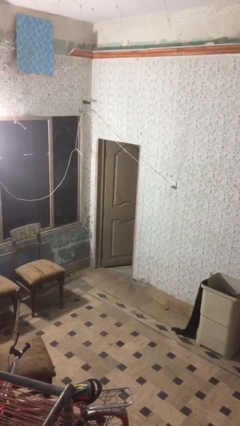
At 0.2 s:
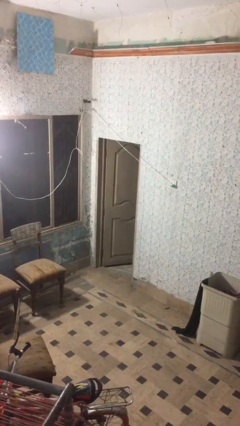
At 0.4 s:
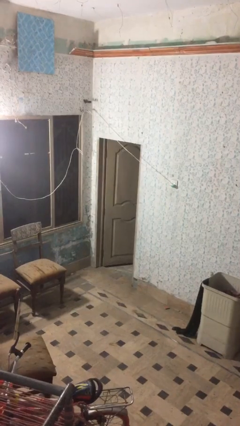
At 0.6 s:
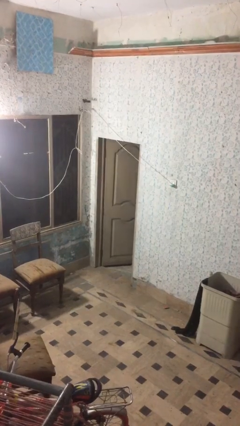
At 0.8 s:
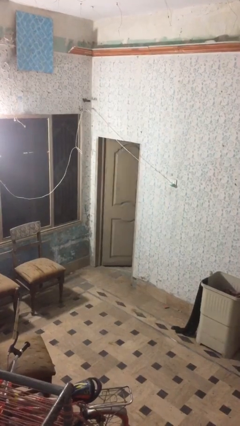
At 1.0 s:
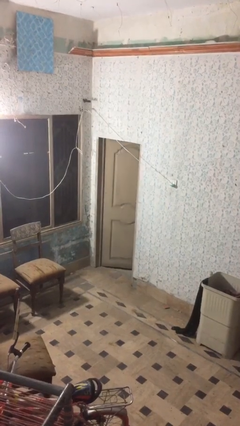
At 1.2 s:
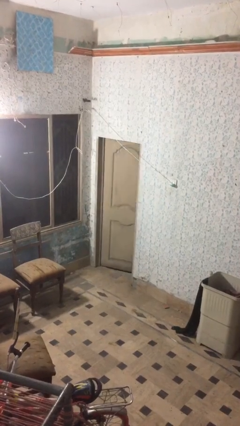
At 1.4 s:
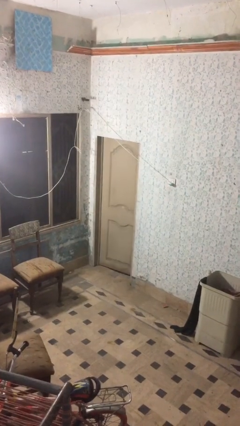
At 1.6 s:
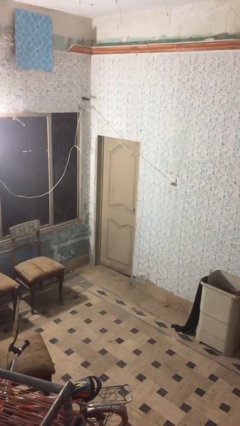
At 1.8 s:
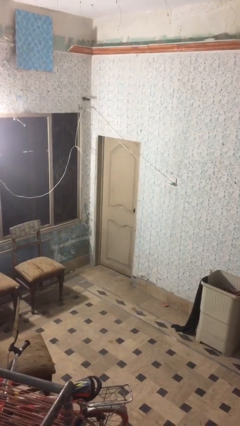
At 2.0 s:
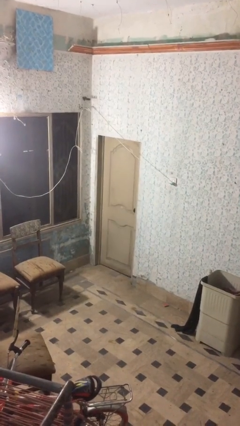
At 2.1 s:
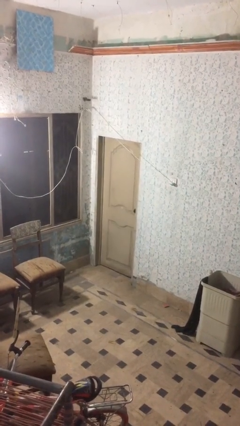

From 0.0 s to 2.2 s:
person closes facility door

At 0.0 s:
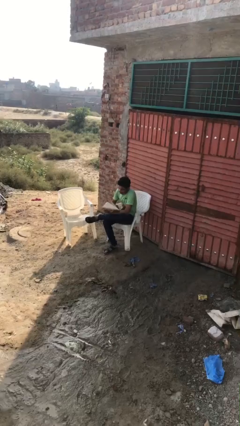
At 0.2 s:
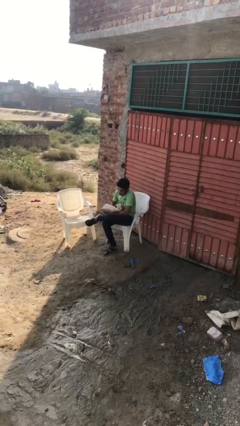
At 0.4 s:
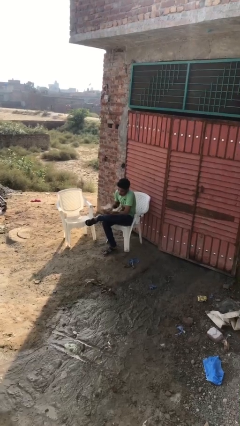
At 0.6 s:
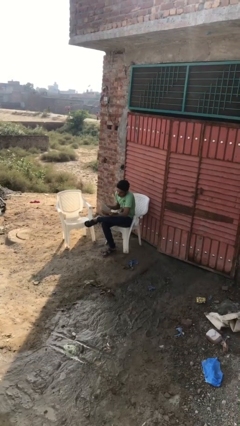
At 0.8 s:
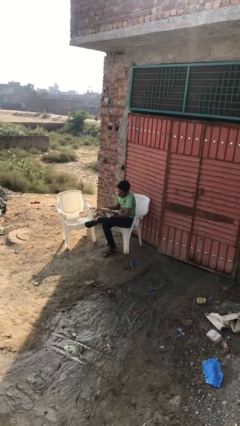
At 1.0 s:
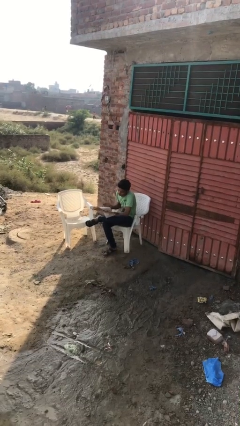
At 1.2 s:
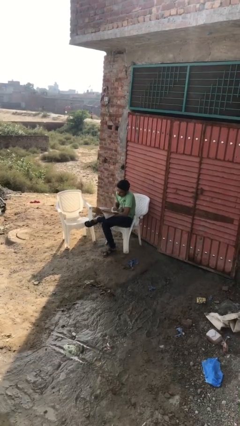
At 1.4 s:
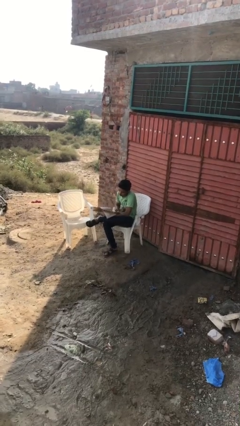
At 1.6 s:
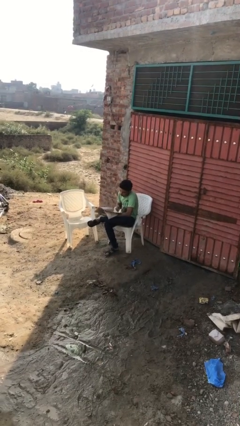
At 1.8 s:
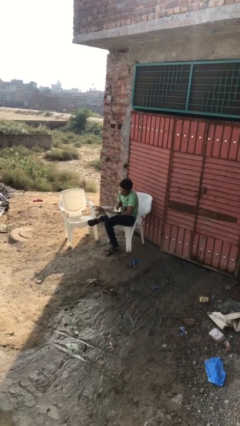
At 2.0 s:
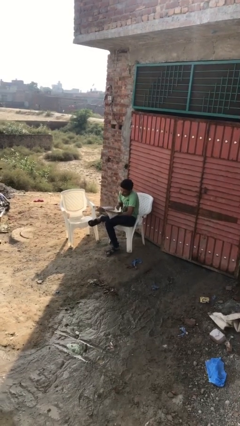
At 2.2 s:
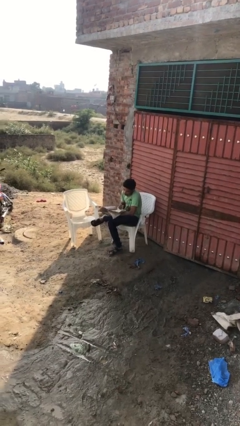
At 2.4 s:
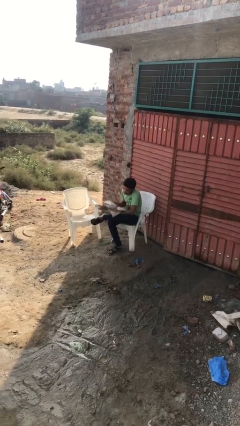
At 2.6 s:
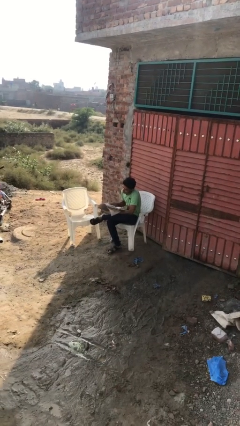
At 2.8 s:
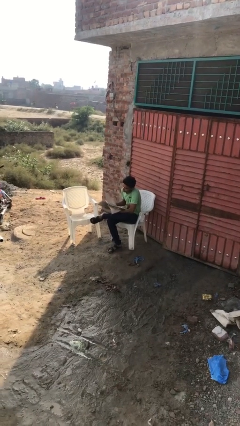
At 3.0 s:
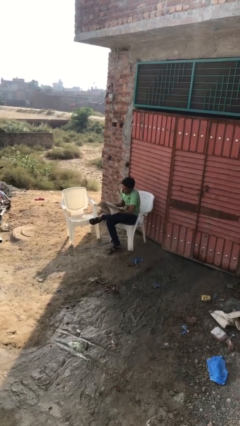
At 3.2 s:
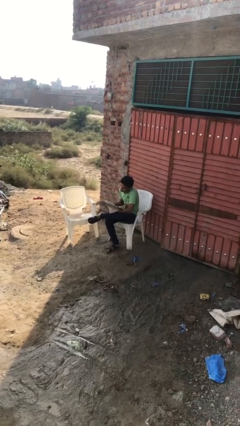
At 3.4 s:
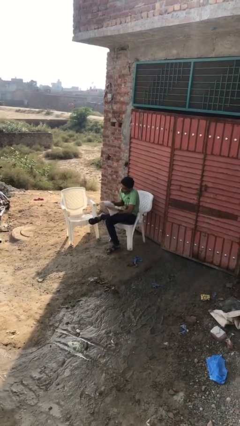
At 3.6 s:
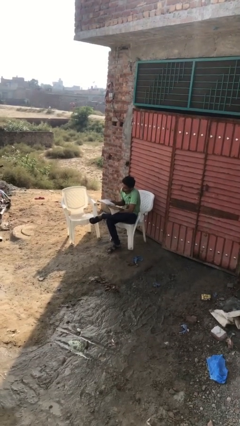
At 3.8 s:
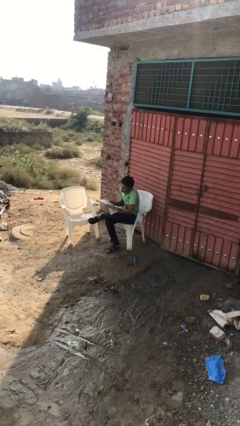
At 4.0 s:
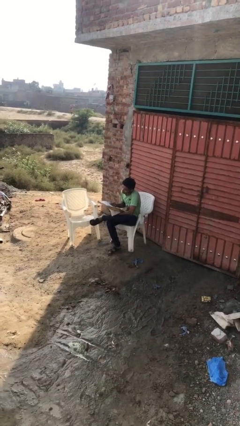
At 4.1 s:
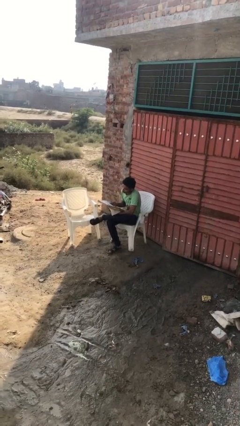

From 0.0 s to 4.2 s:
person reads document

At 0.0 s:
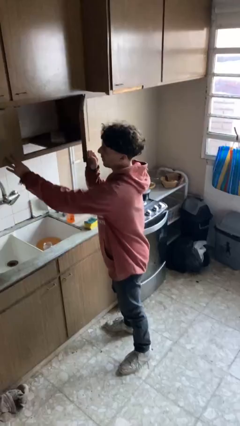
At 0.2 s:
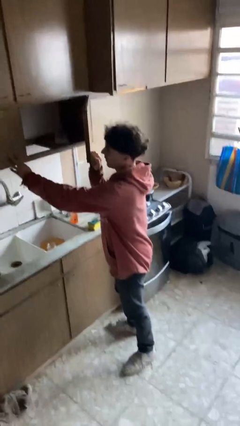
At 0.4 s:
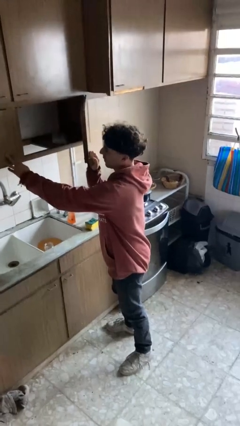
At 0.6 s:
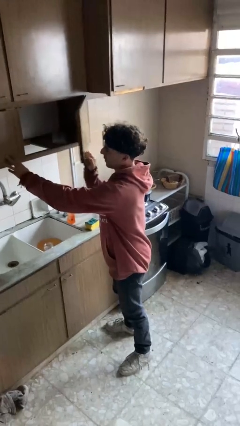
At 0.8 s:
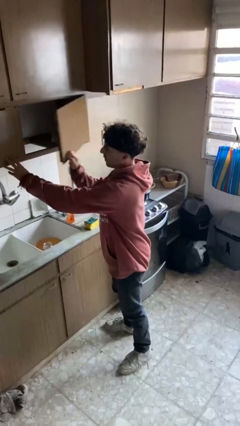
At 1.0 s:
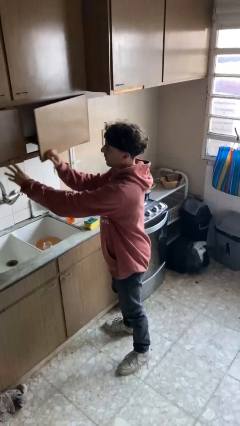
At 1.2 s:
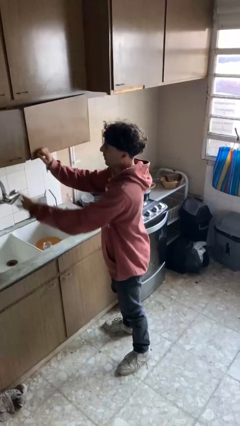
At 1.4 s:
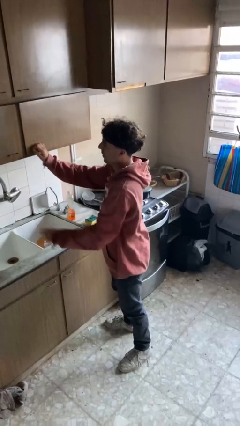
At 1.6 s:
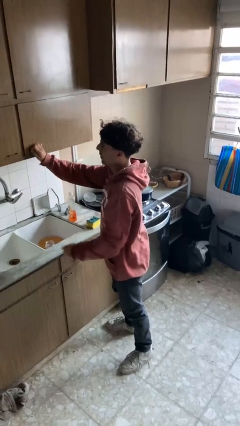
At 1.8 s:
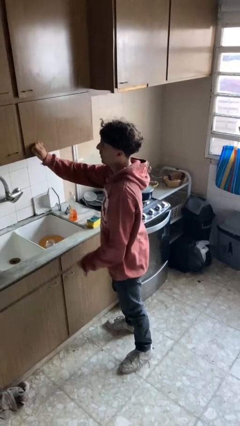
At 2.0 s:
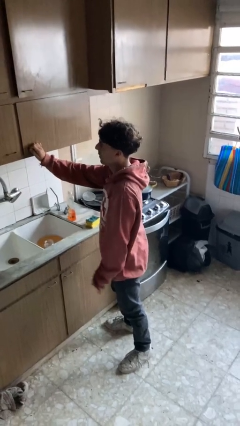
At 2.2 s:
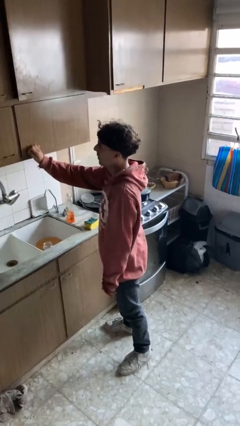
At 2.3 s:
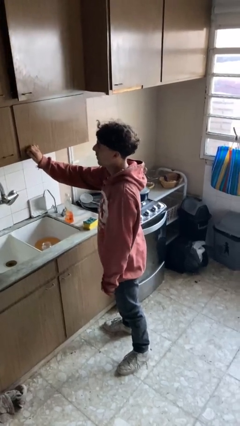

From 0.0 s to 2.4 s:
person closes cabinet

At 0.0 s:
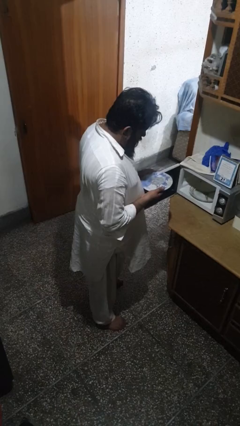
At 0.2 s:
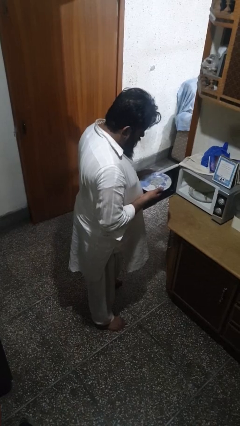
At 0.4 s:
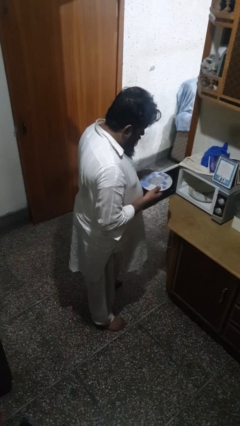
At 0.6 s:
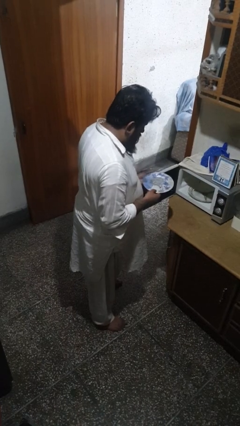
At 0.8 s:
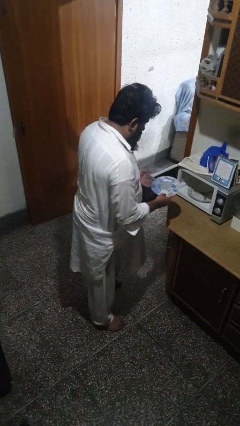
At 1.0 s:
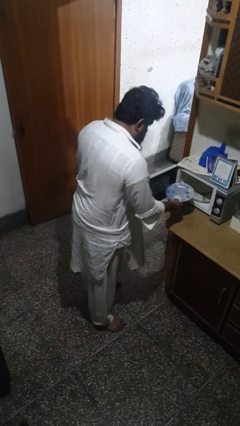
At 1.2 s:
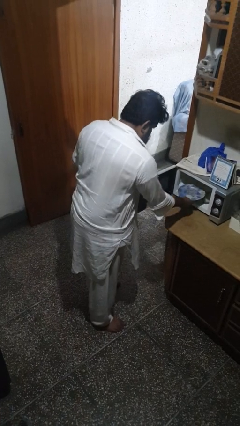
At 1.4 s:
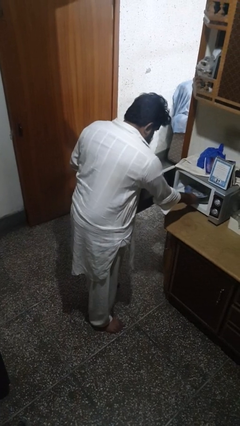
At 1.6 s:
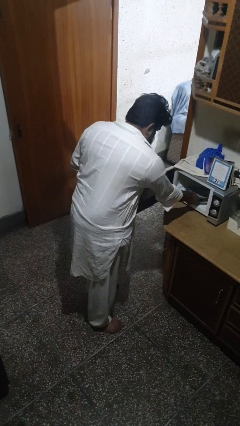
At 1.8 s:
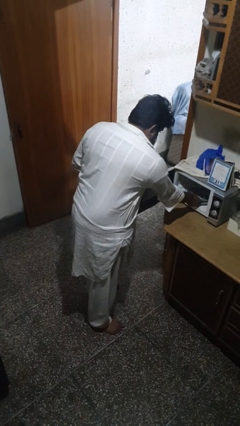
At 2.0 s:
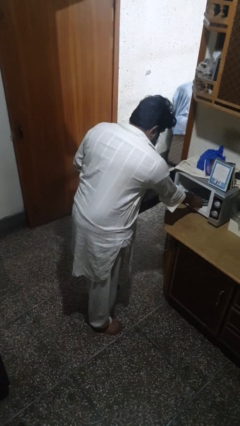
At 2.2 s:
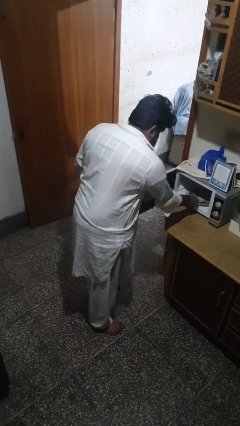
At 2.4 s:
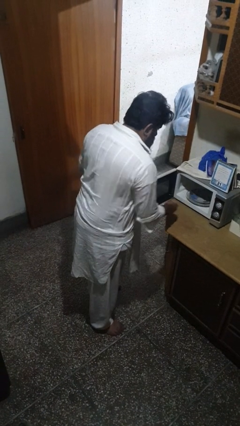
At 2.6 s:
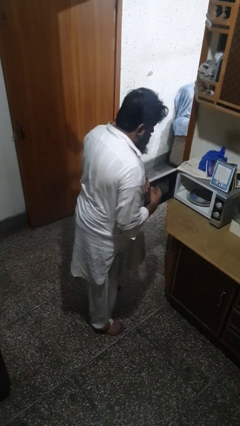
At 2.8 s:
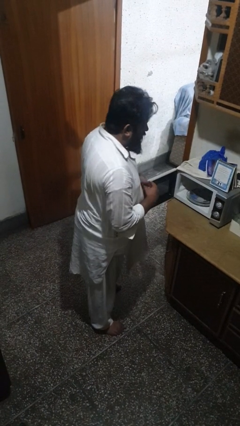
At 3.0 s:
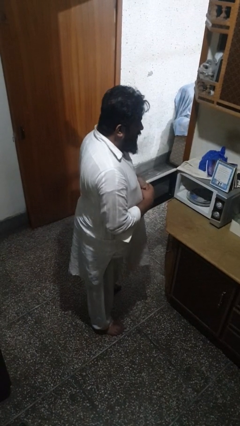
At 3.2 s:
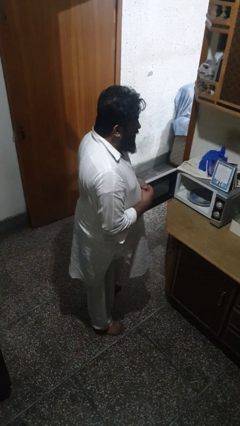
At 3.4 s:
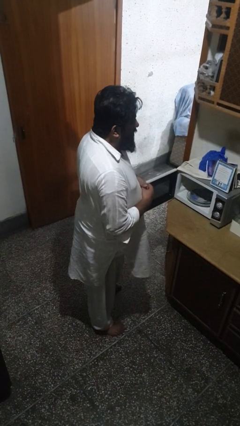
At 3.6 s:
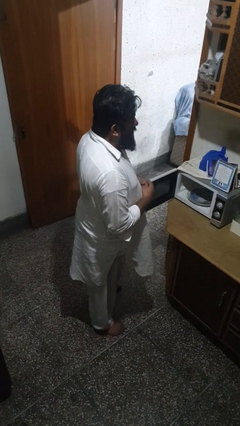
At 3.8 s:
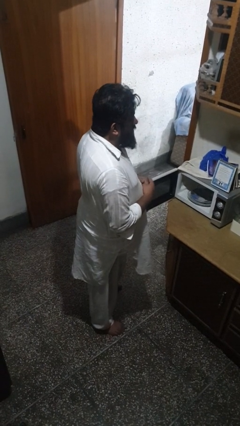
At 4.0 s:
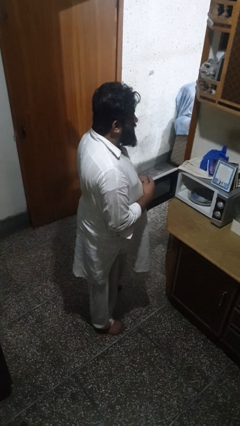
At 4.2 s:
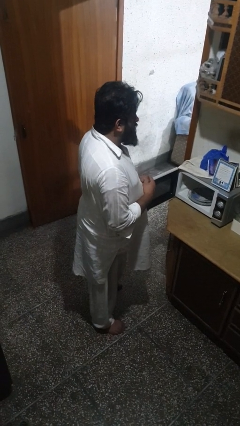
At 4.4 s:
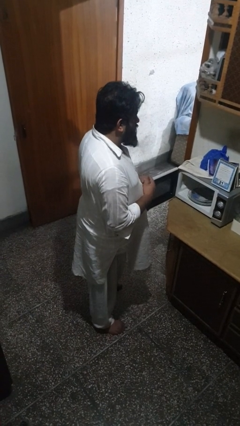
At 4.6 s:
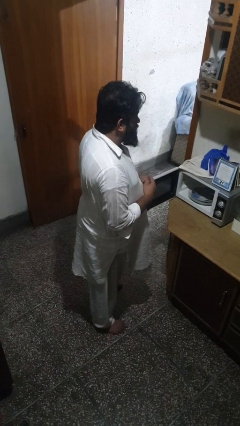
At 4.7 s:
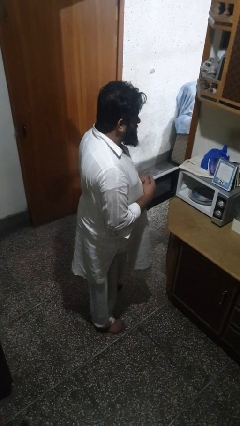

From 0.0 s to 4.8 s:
person puts object into oven

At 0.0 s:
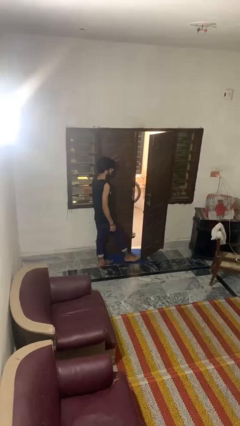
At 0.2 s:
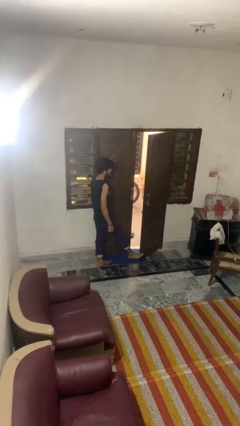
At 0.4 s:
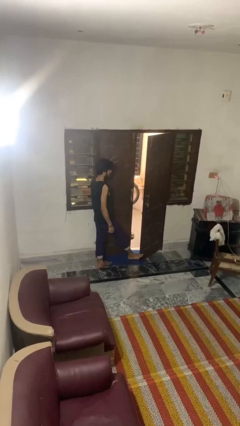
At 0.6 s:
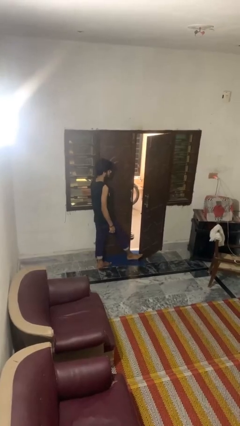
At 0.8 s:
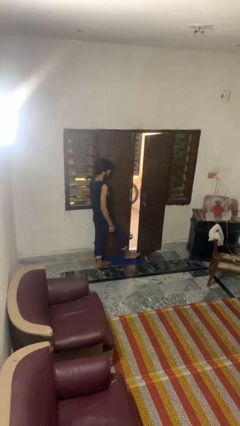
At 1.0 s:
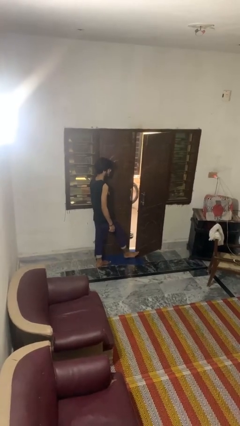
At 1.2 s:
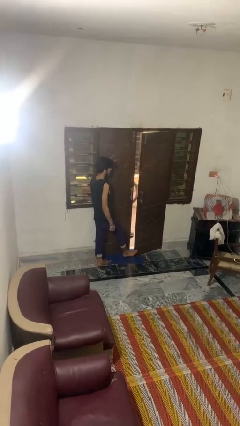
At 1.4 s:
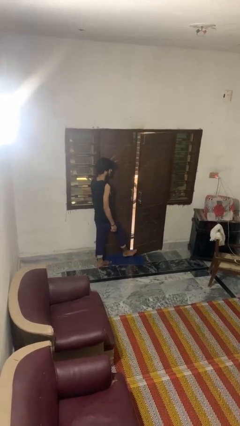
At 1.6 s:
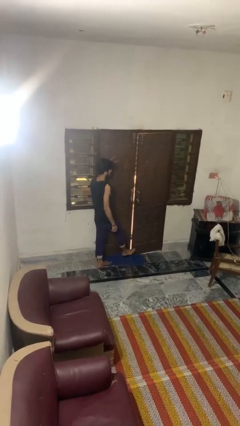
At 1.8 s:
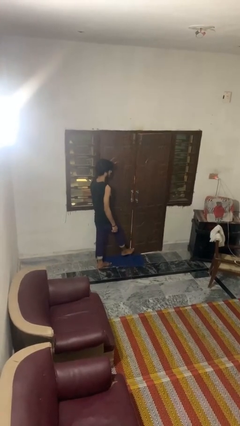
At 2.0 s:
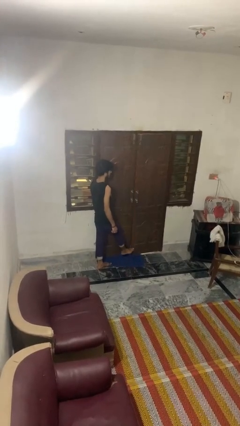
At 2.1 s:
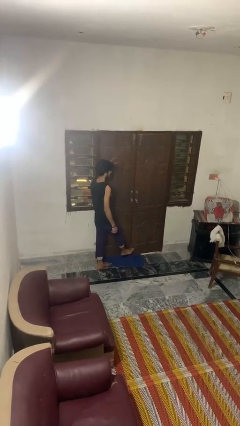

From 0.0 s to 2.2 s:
person closes door with foot

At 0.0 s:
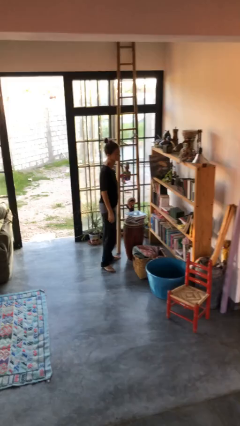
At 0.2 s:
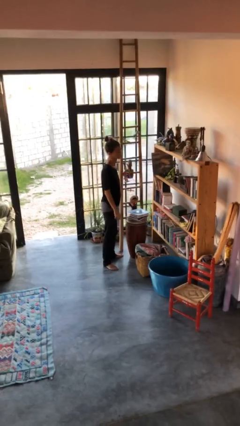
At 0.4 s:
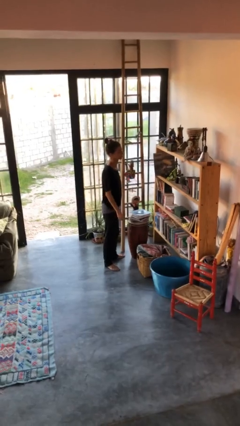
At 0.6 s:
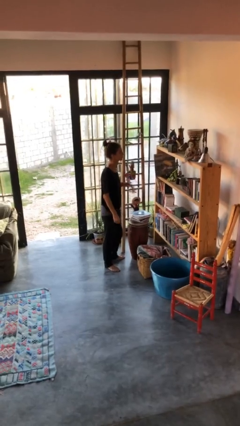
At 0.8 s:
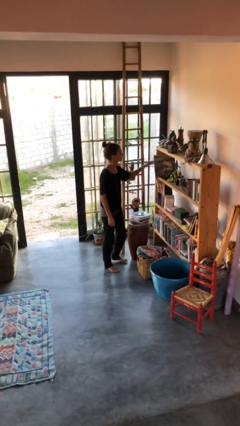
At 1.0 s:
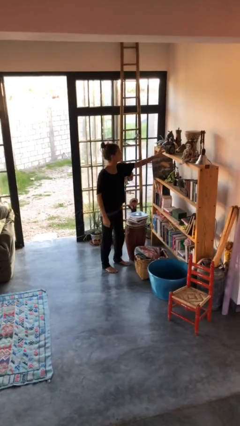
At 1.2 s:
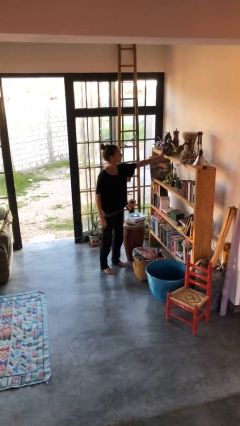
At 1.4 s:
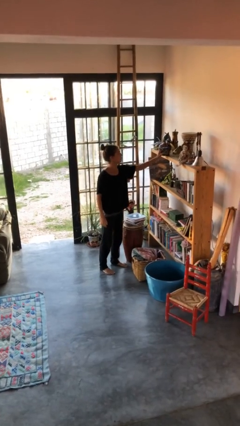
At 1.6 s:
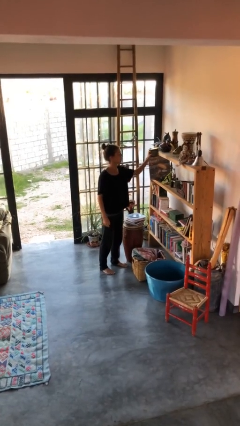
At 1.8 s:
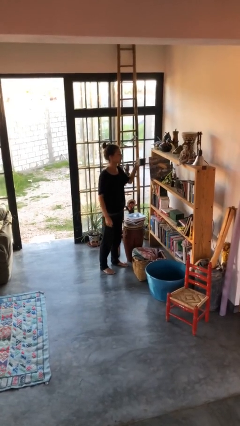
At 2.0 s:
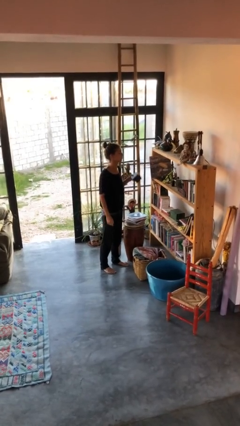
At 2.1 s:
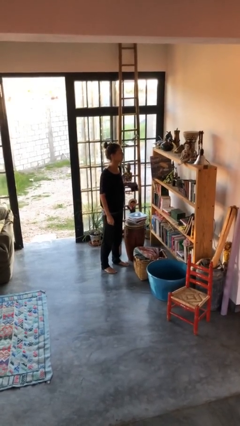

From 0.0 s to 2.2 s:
person picks up object from countertop
